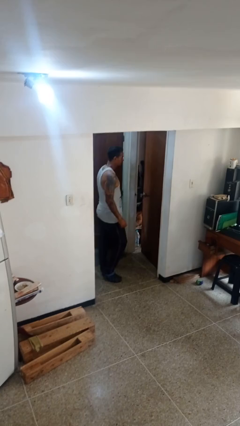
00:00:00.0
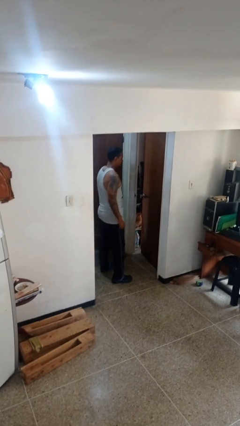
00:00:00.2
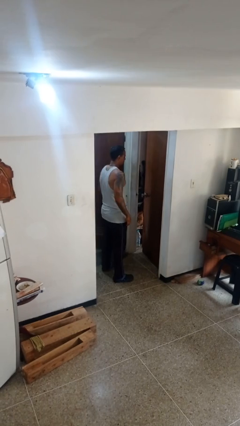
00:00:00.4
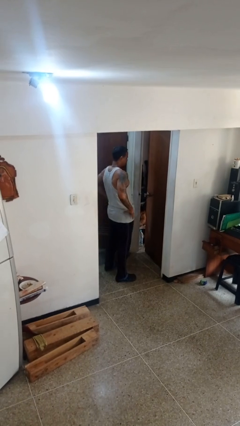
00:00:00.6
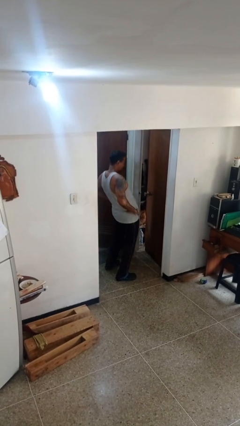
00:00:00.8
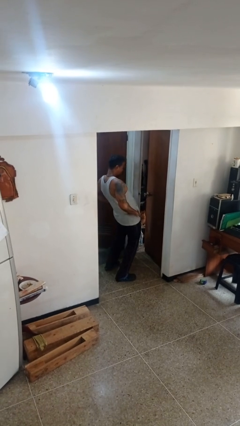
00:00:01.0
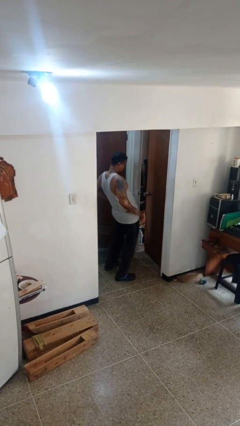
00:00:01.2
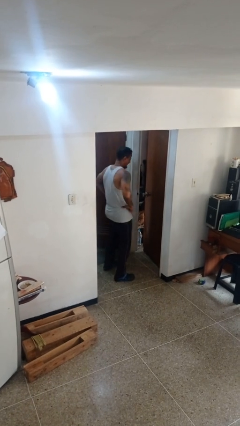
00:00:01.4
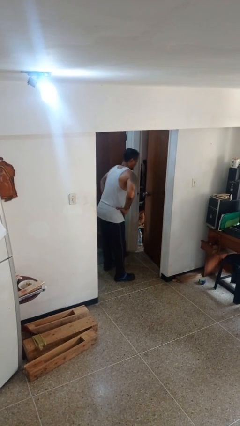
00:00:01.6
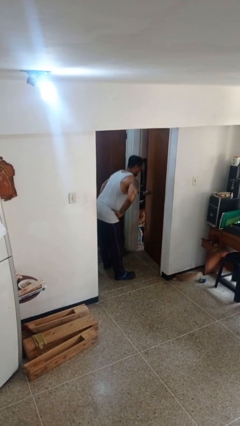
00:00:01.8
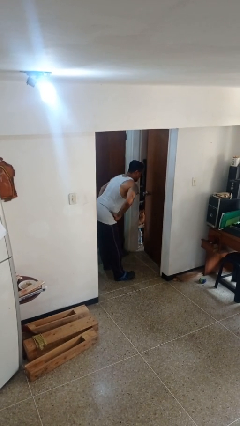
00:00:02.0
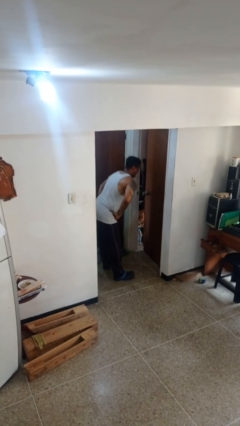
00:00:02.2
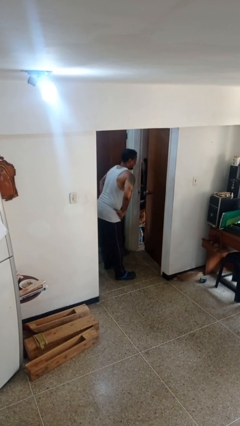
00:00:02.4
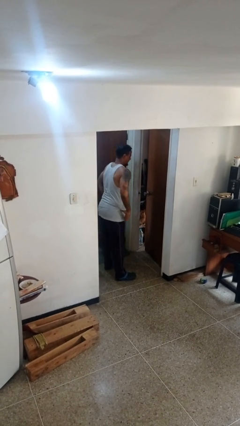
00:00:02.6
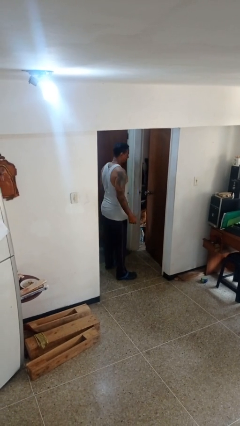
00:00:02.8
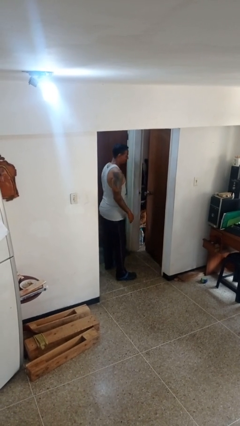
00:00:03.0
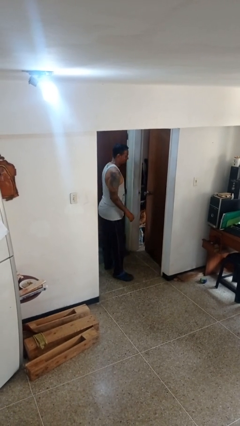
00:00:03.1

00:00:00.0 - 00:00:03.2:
person wiggles hips

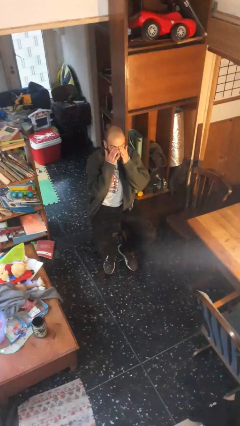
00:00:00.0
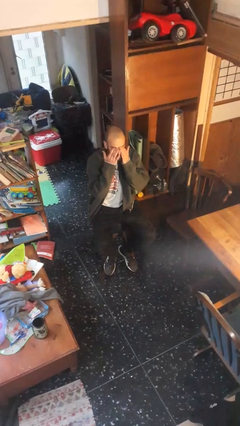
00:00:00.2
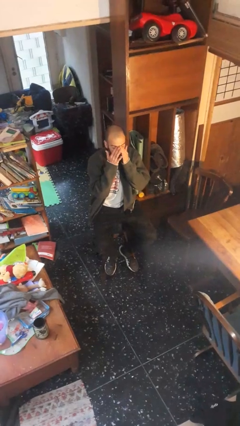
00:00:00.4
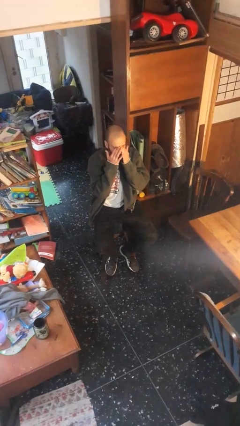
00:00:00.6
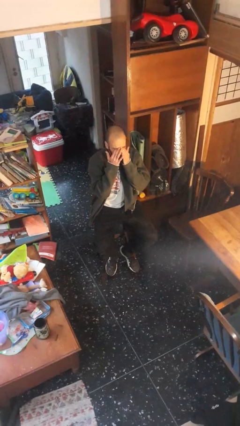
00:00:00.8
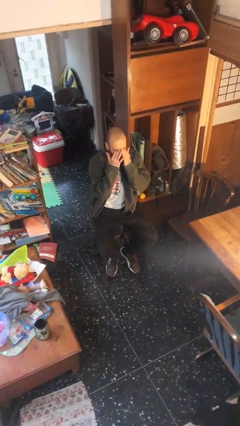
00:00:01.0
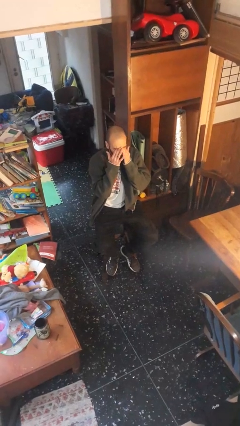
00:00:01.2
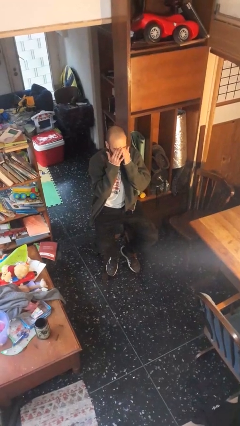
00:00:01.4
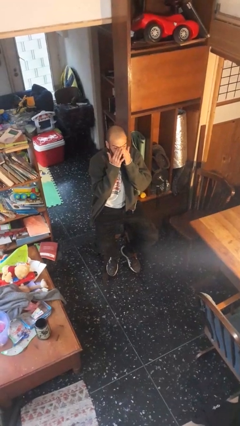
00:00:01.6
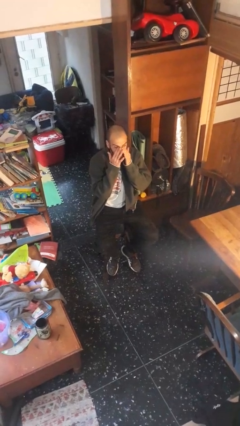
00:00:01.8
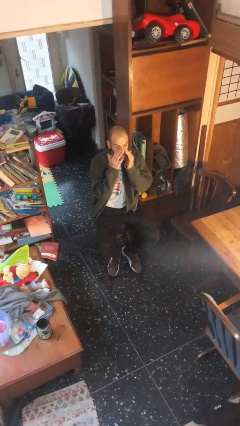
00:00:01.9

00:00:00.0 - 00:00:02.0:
person rubs eyes

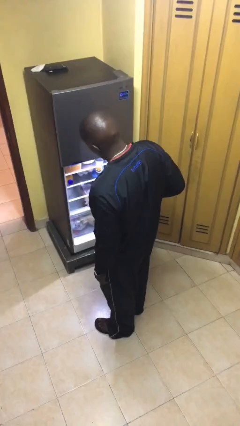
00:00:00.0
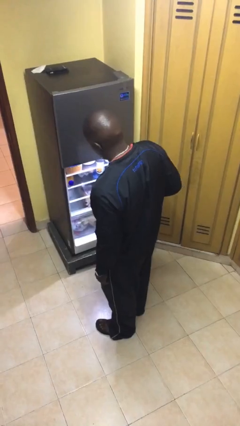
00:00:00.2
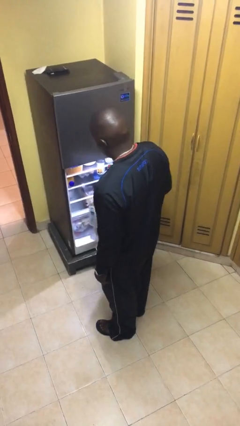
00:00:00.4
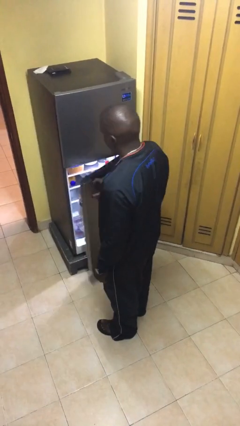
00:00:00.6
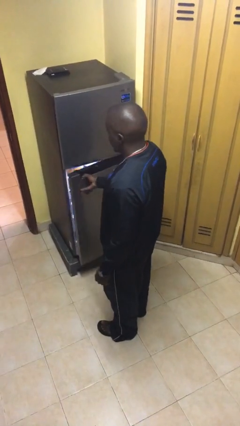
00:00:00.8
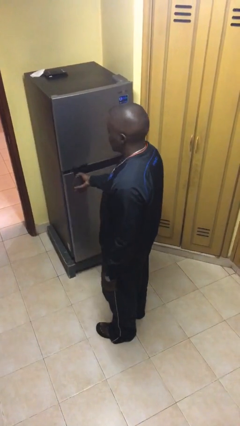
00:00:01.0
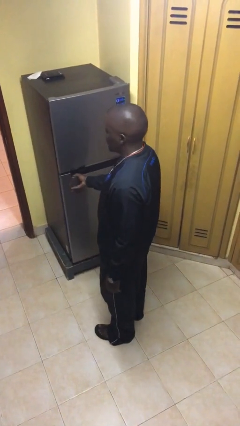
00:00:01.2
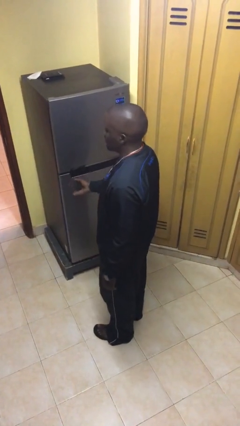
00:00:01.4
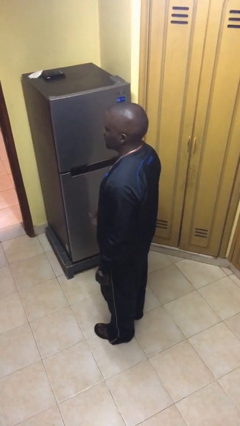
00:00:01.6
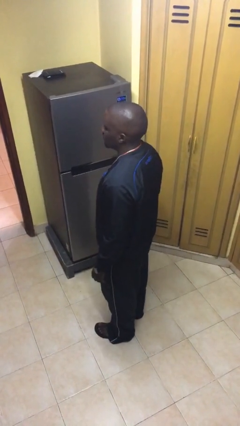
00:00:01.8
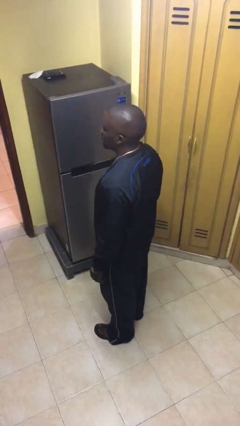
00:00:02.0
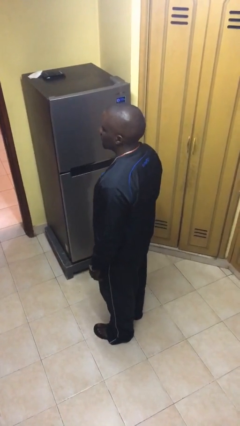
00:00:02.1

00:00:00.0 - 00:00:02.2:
person closes refrigerator

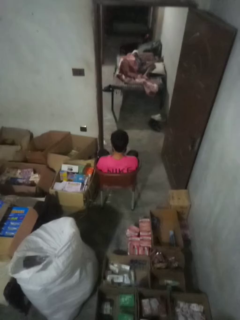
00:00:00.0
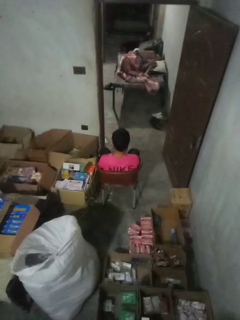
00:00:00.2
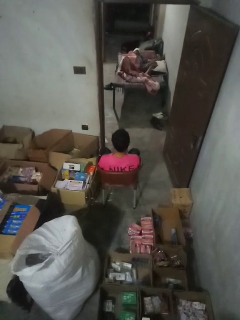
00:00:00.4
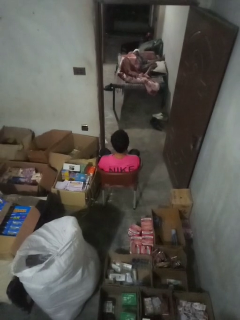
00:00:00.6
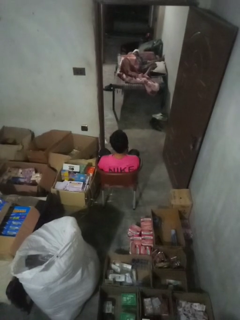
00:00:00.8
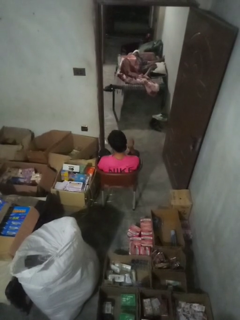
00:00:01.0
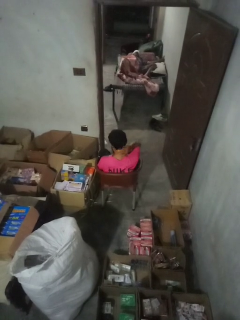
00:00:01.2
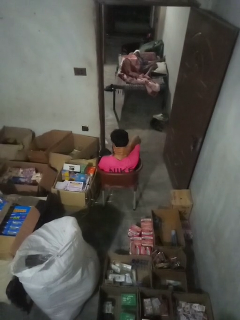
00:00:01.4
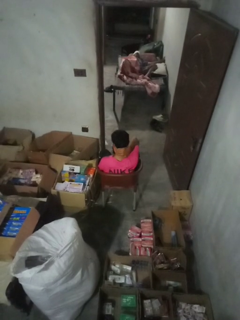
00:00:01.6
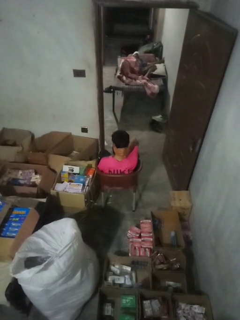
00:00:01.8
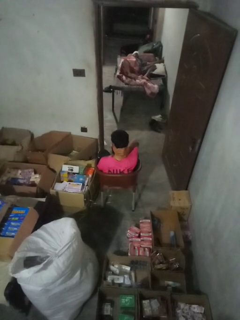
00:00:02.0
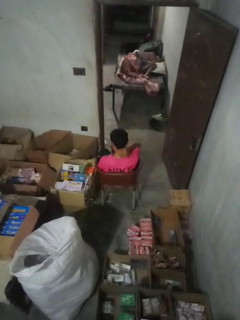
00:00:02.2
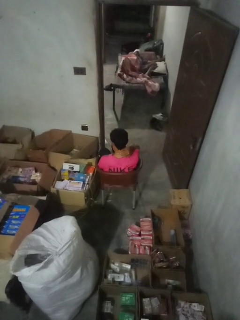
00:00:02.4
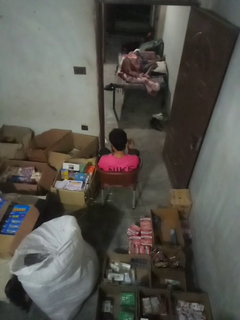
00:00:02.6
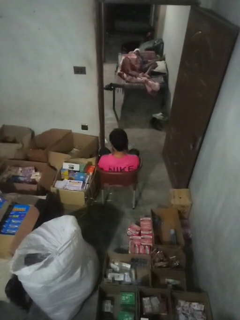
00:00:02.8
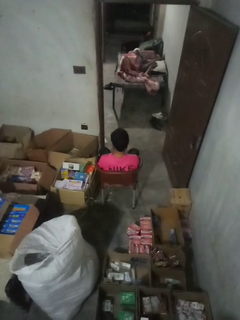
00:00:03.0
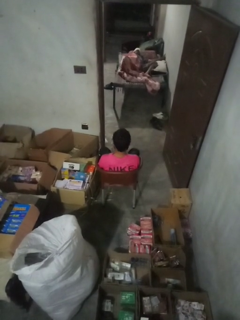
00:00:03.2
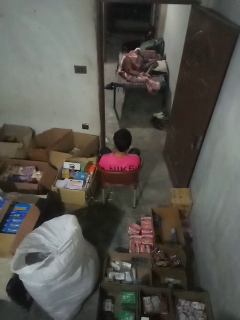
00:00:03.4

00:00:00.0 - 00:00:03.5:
person rubs neck

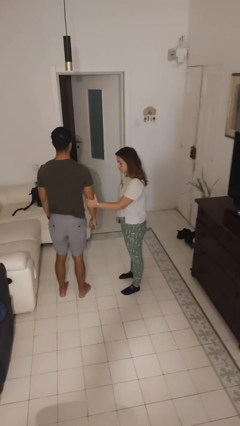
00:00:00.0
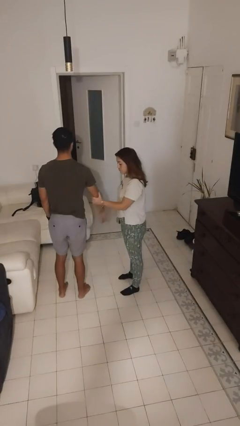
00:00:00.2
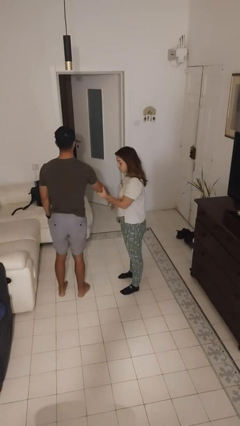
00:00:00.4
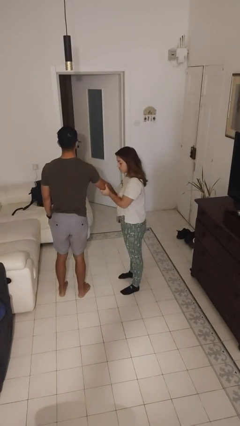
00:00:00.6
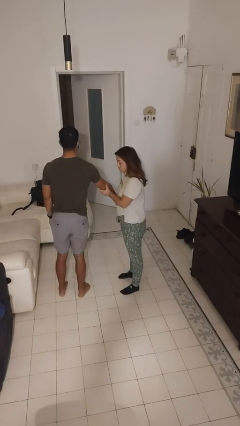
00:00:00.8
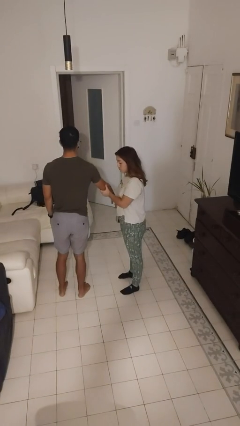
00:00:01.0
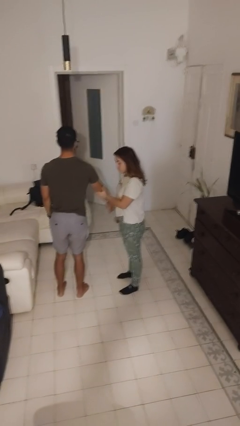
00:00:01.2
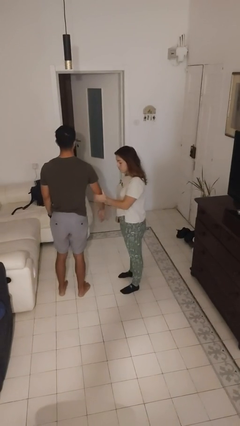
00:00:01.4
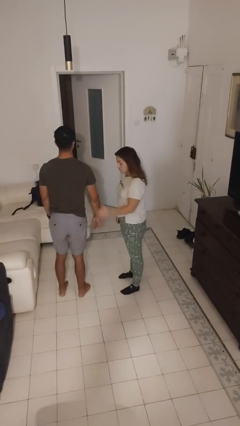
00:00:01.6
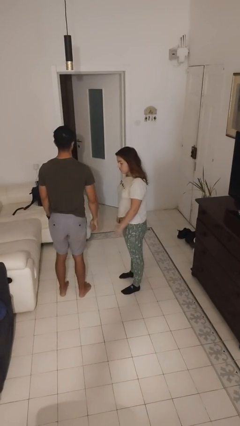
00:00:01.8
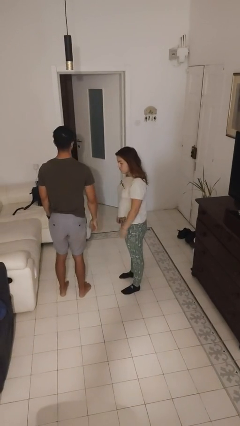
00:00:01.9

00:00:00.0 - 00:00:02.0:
person grabs person by forearm

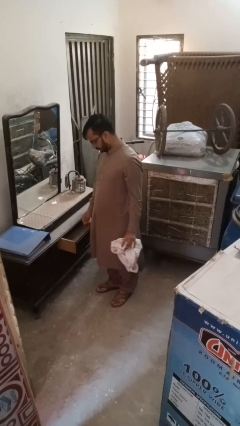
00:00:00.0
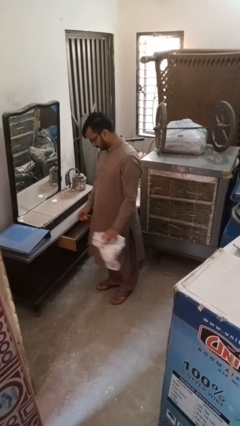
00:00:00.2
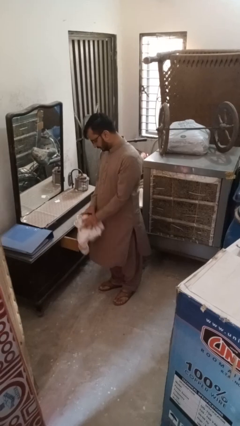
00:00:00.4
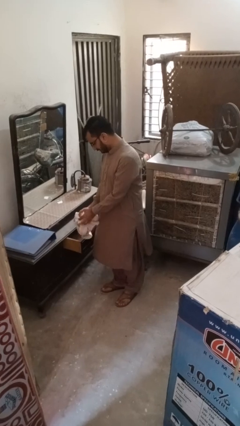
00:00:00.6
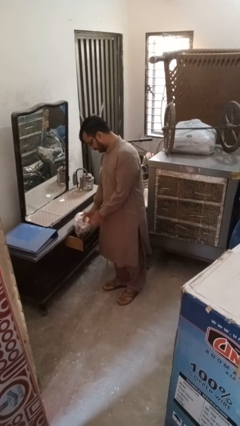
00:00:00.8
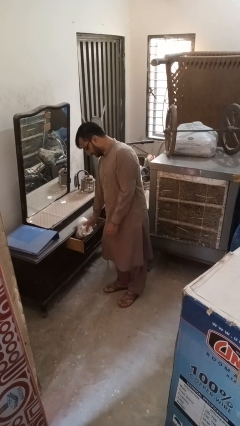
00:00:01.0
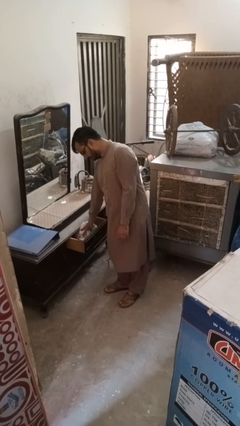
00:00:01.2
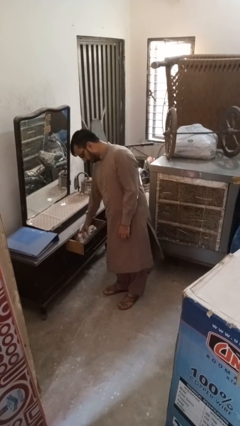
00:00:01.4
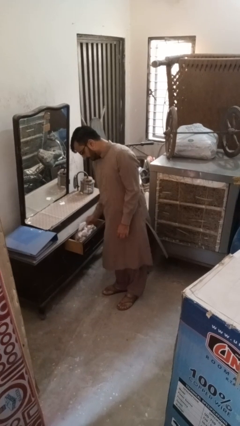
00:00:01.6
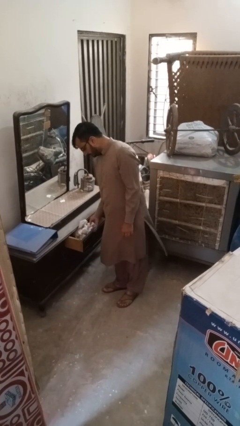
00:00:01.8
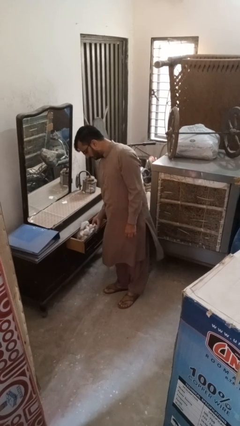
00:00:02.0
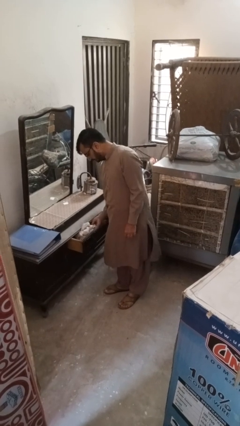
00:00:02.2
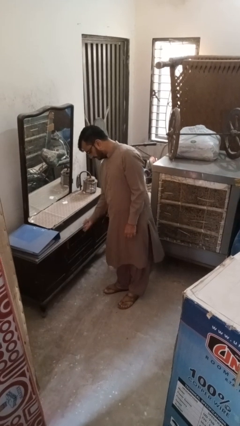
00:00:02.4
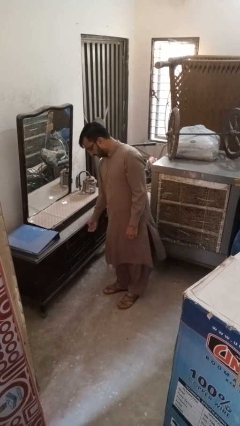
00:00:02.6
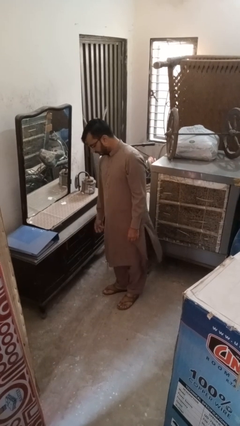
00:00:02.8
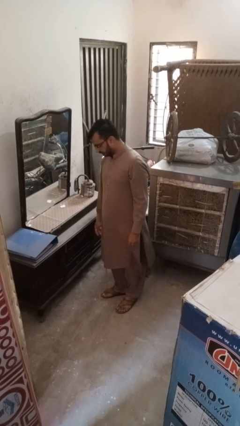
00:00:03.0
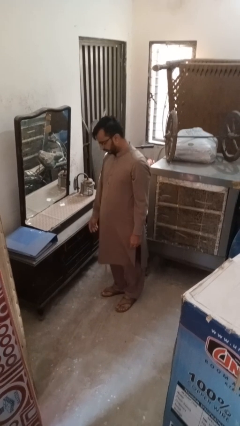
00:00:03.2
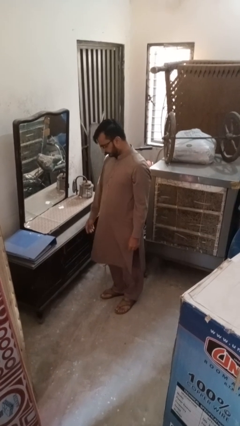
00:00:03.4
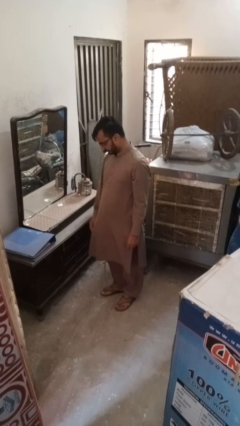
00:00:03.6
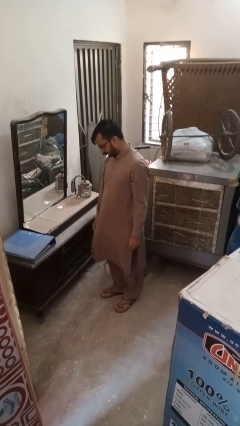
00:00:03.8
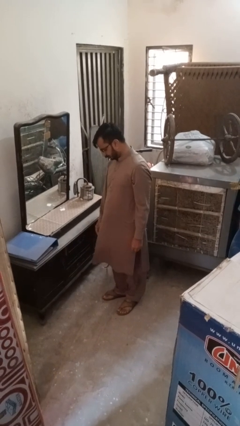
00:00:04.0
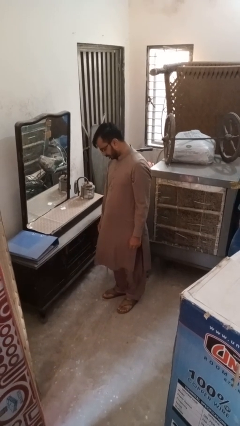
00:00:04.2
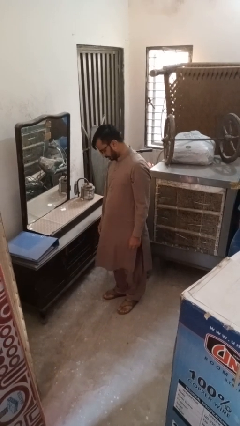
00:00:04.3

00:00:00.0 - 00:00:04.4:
person puts clothes into dresser

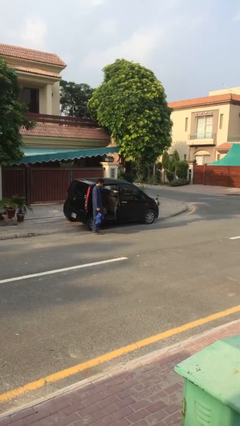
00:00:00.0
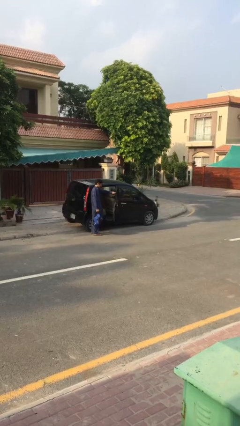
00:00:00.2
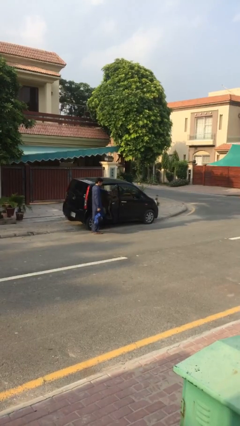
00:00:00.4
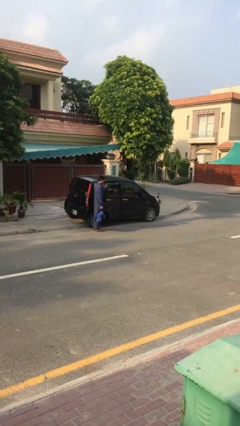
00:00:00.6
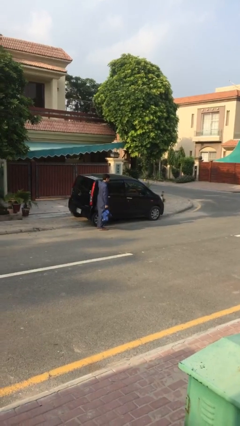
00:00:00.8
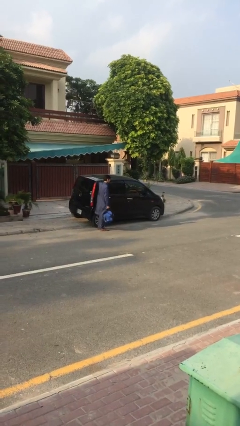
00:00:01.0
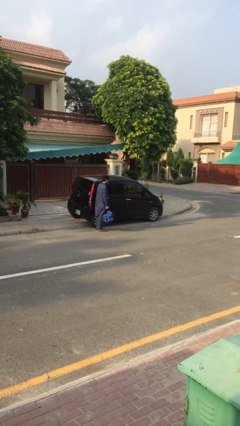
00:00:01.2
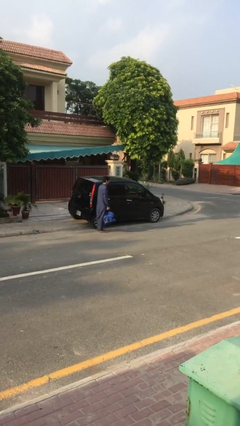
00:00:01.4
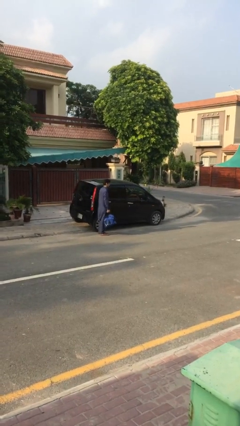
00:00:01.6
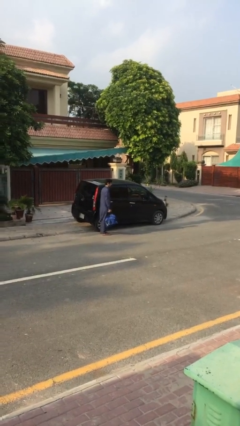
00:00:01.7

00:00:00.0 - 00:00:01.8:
person closes car door
